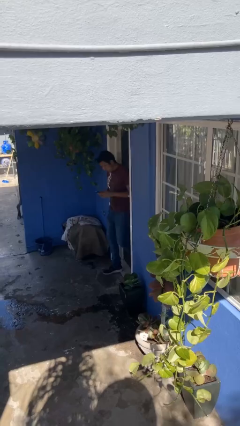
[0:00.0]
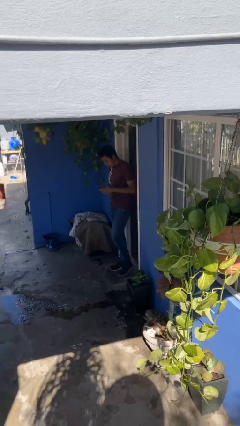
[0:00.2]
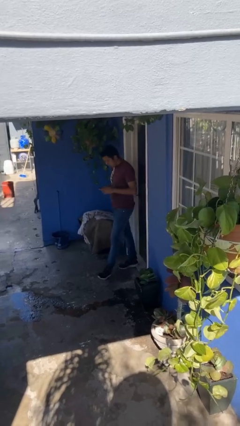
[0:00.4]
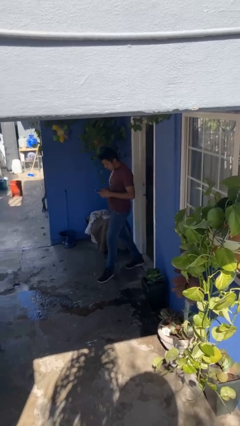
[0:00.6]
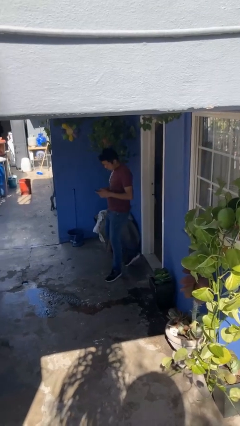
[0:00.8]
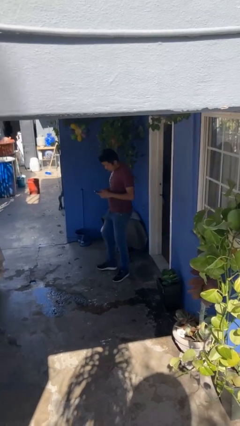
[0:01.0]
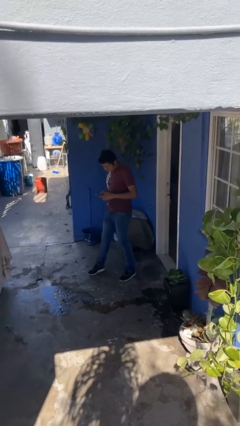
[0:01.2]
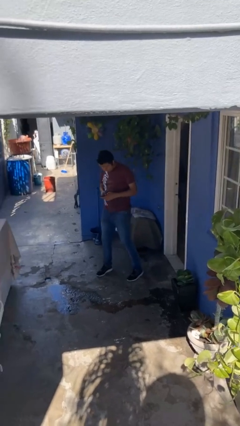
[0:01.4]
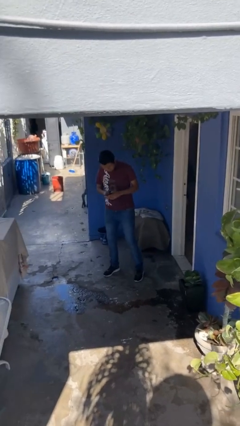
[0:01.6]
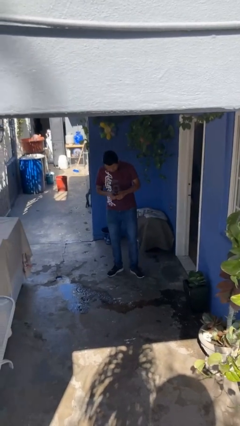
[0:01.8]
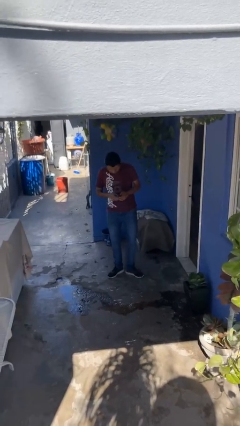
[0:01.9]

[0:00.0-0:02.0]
person enters scene through structure

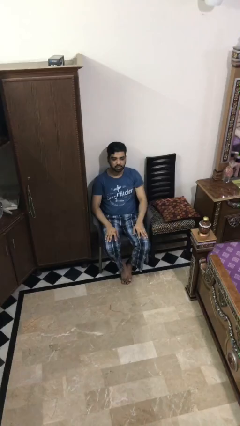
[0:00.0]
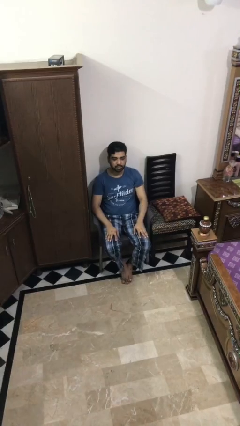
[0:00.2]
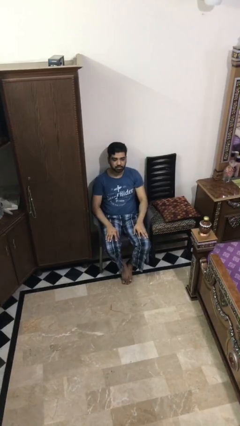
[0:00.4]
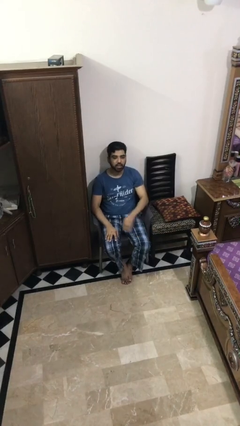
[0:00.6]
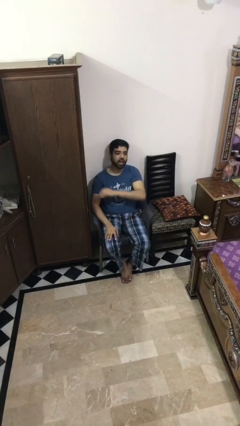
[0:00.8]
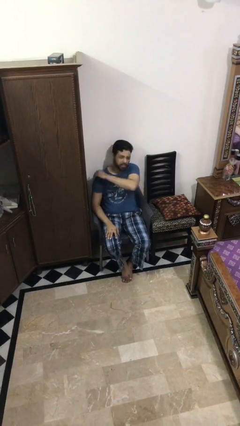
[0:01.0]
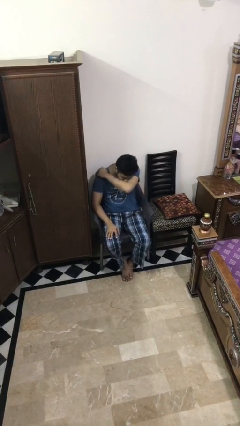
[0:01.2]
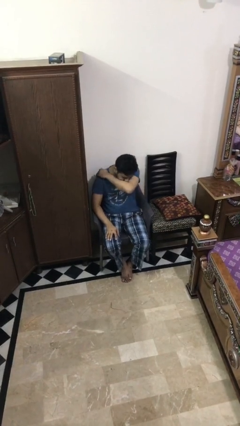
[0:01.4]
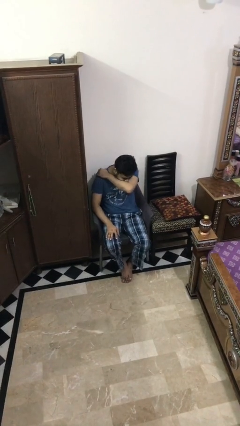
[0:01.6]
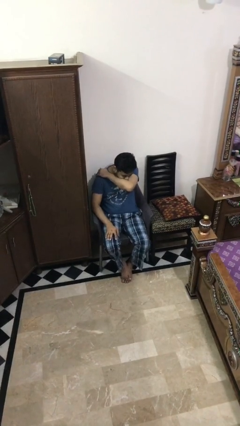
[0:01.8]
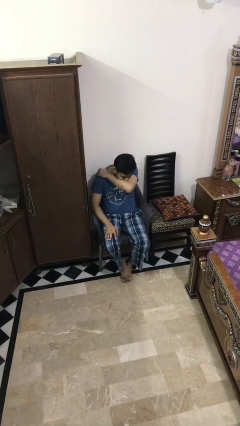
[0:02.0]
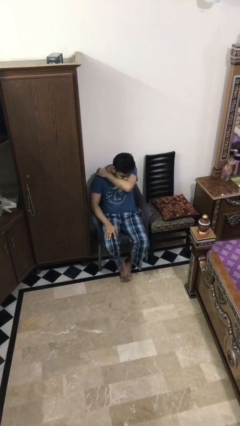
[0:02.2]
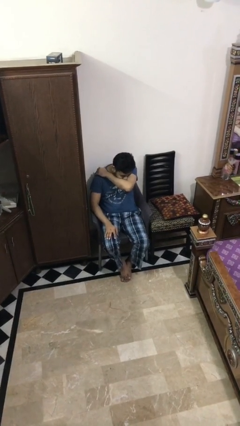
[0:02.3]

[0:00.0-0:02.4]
person sneezes into arm

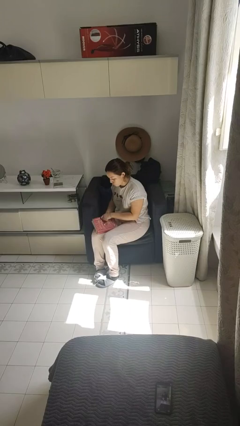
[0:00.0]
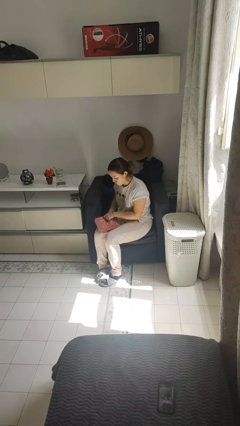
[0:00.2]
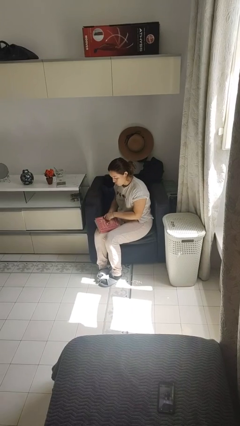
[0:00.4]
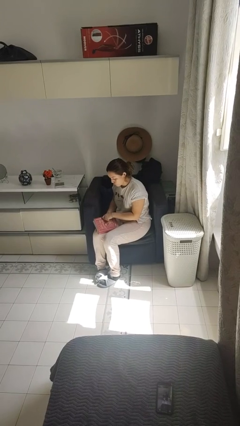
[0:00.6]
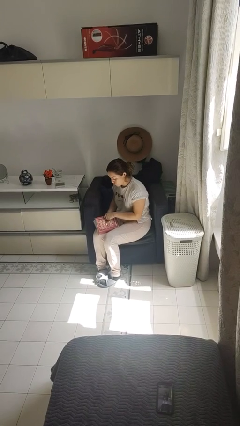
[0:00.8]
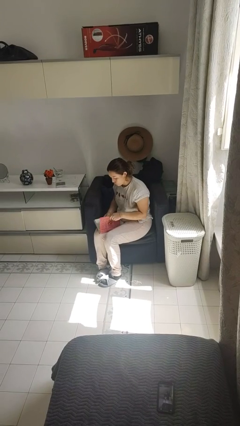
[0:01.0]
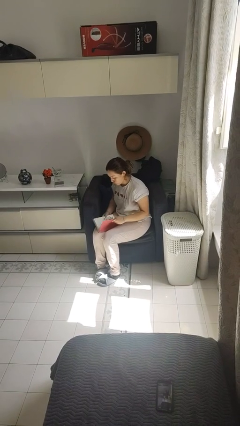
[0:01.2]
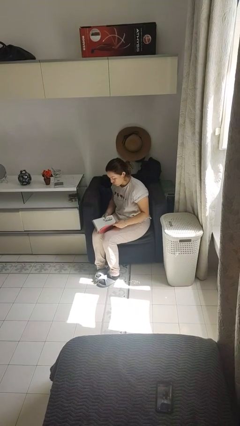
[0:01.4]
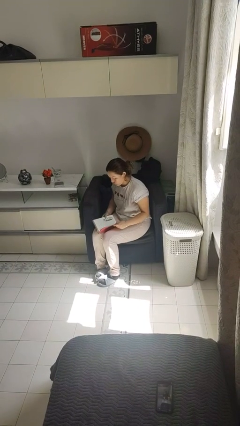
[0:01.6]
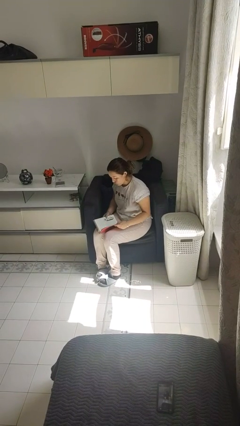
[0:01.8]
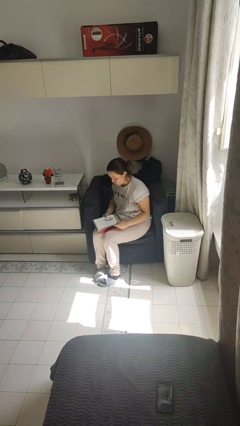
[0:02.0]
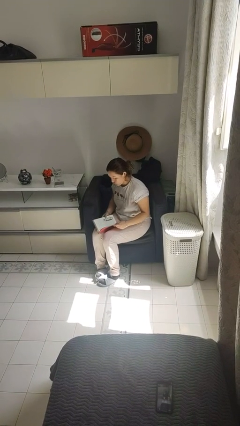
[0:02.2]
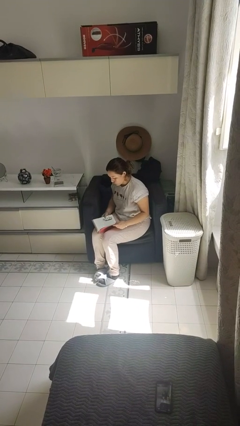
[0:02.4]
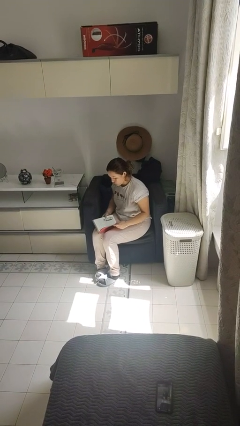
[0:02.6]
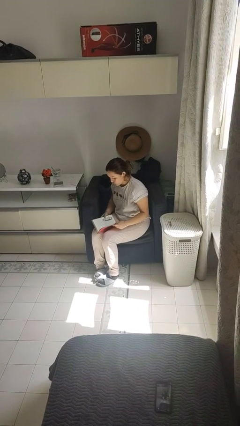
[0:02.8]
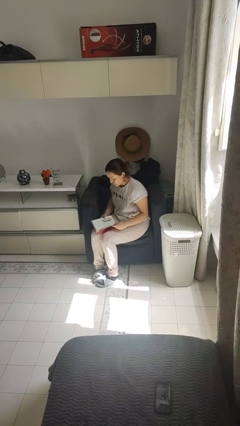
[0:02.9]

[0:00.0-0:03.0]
person reads book

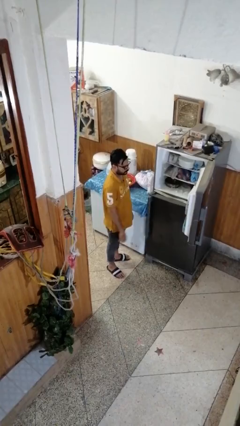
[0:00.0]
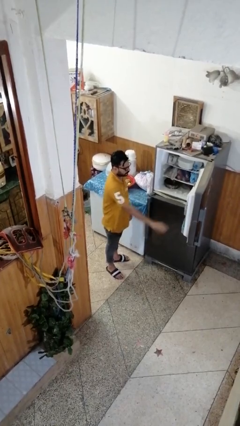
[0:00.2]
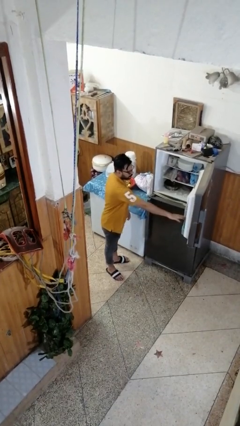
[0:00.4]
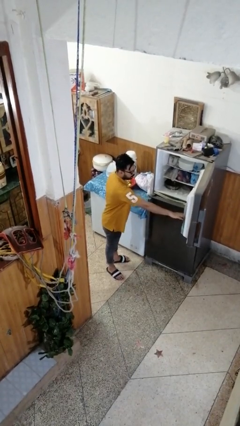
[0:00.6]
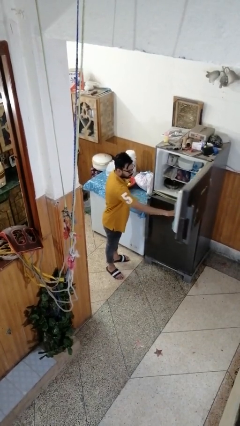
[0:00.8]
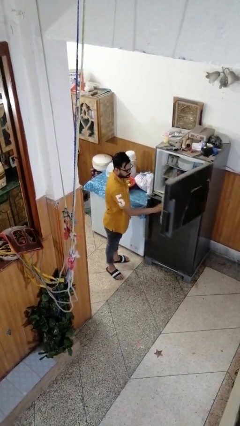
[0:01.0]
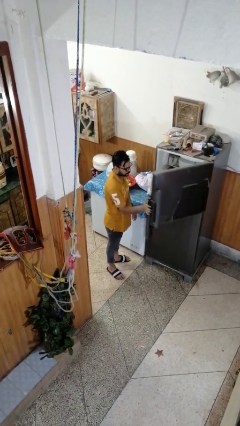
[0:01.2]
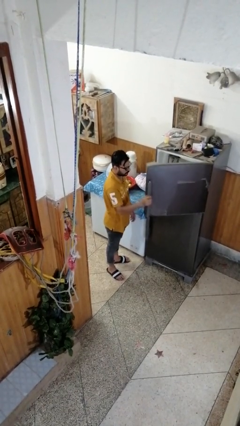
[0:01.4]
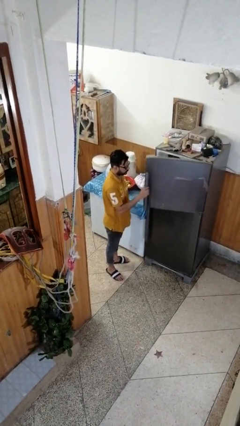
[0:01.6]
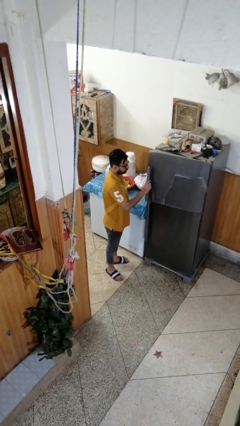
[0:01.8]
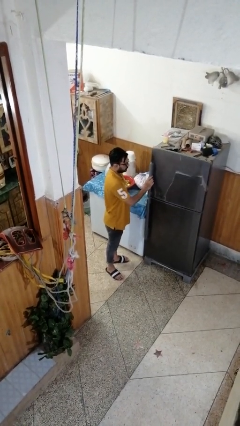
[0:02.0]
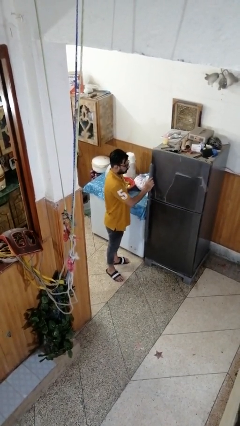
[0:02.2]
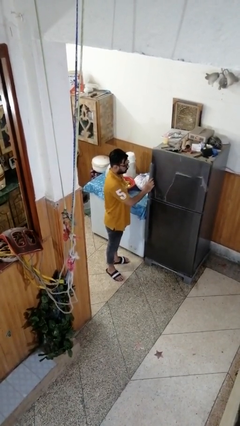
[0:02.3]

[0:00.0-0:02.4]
person closes refrigerator

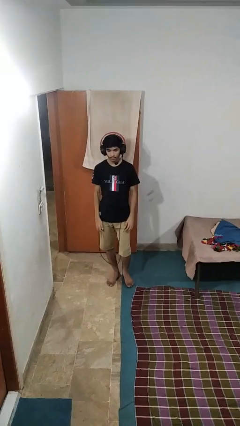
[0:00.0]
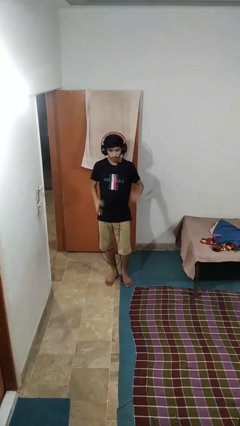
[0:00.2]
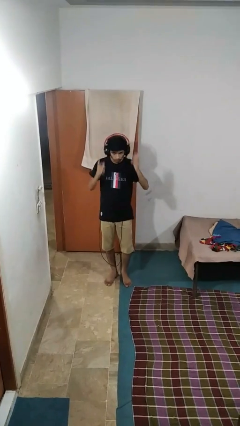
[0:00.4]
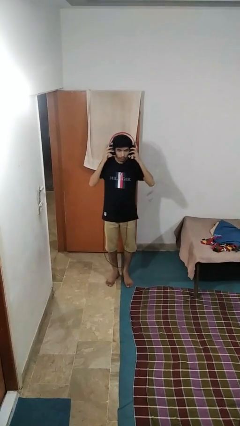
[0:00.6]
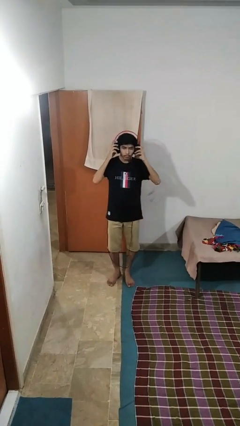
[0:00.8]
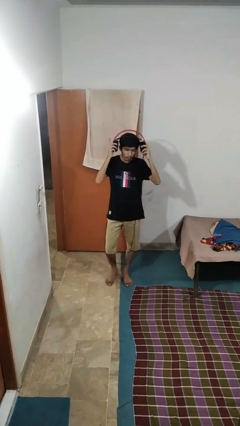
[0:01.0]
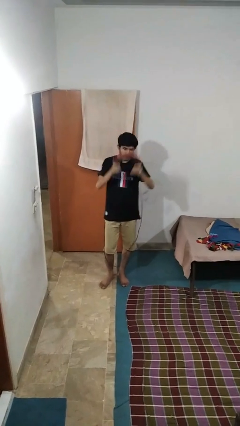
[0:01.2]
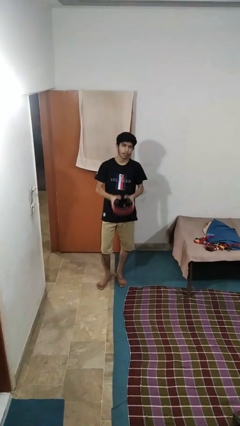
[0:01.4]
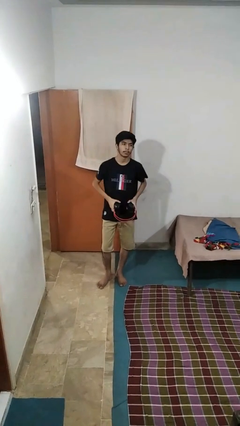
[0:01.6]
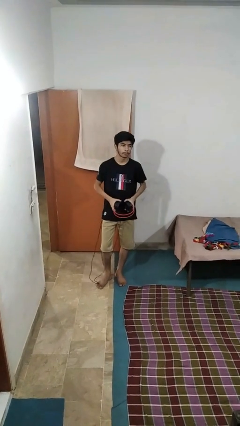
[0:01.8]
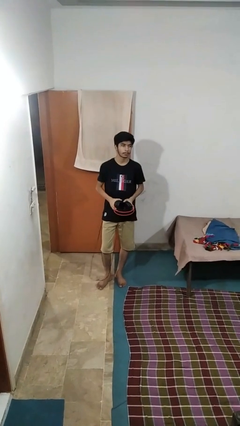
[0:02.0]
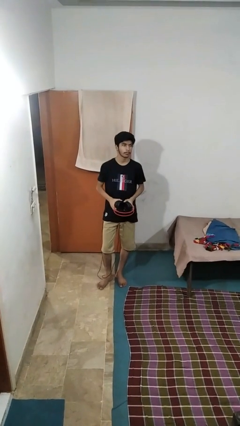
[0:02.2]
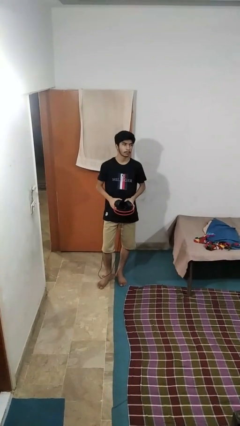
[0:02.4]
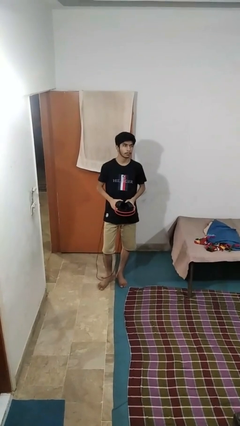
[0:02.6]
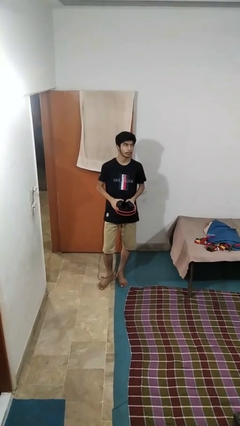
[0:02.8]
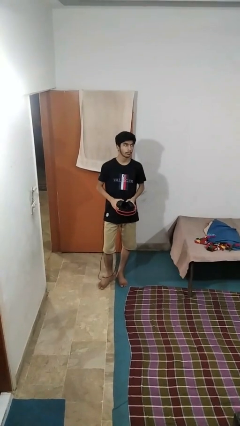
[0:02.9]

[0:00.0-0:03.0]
person takes off headphones

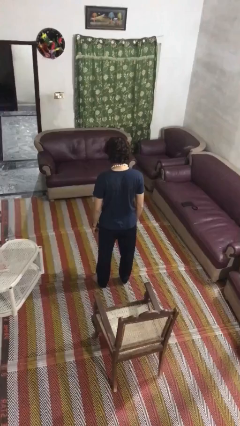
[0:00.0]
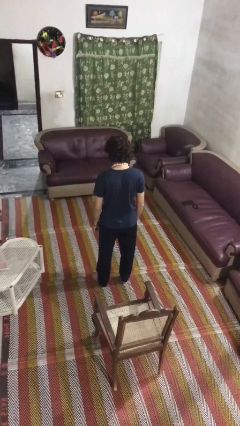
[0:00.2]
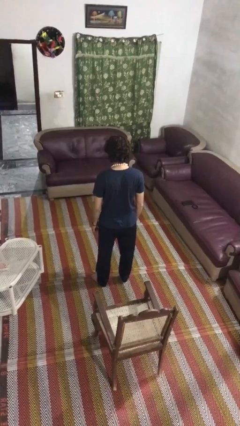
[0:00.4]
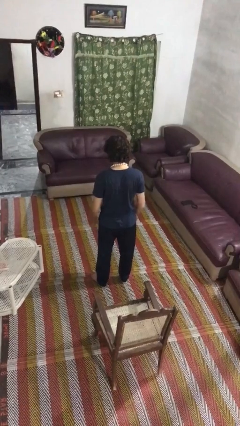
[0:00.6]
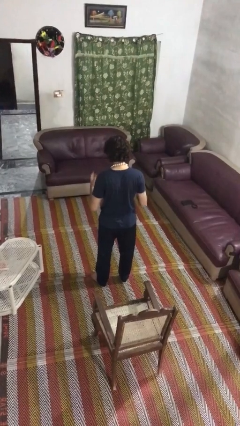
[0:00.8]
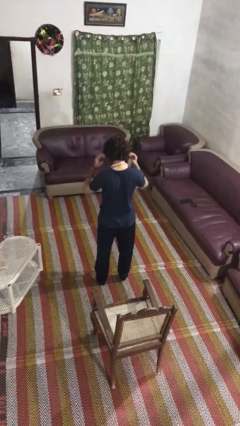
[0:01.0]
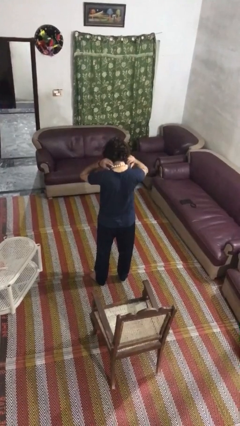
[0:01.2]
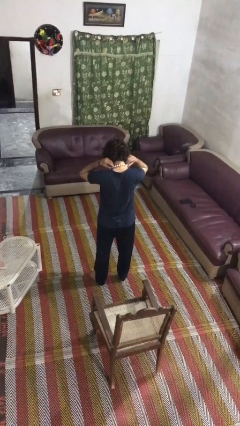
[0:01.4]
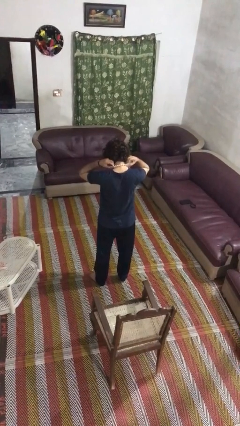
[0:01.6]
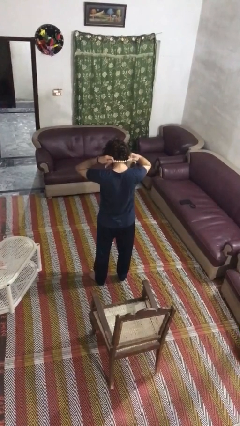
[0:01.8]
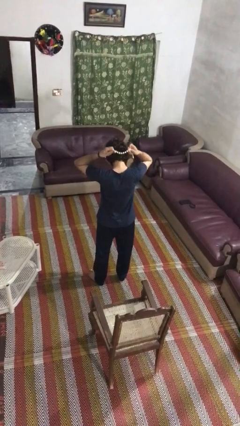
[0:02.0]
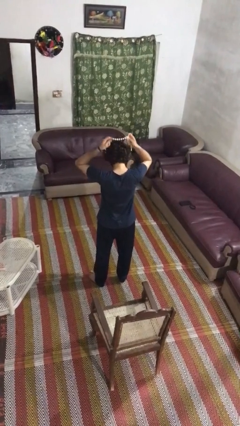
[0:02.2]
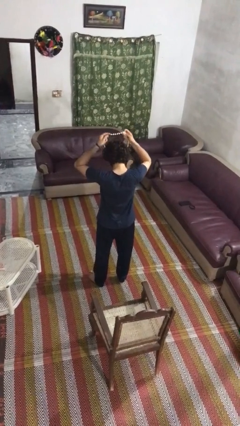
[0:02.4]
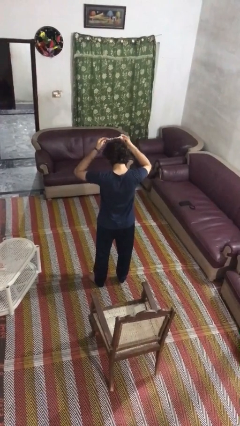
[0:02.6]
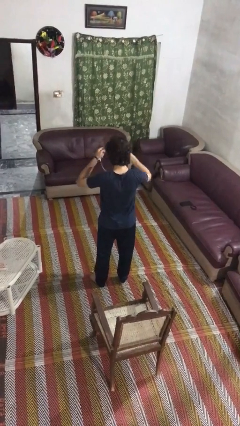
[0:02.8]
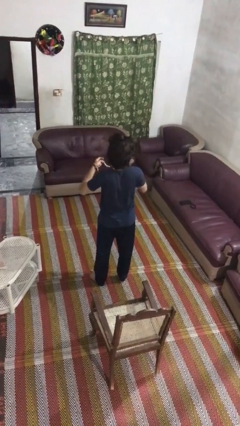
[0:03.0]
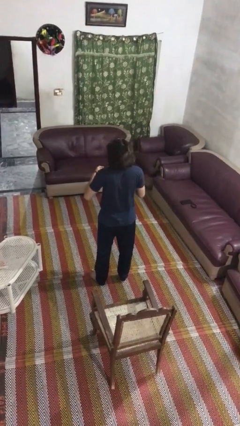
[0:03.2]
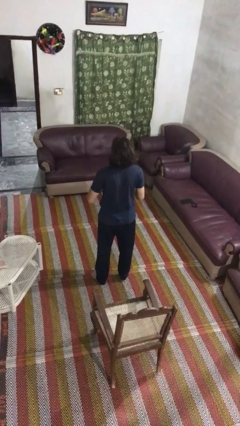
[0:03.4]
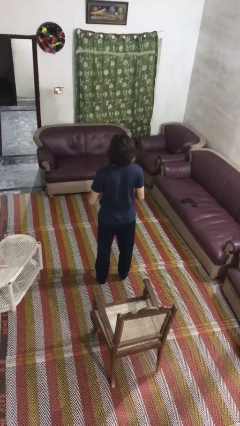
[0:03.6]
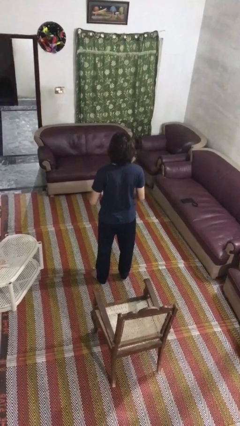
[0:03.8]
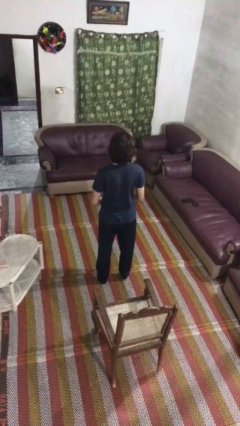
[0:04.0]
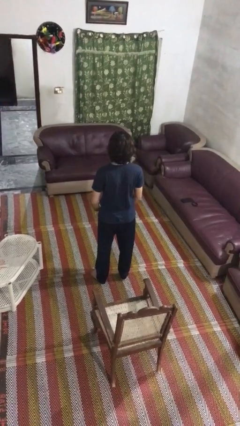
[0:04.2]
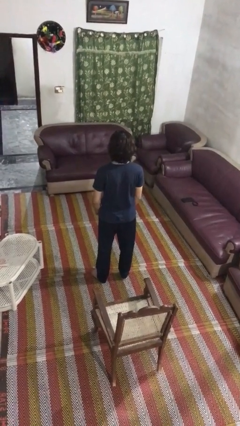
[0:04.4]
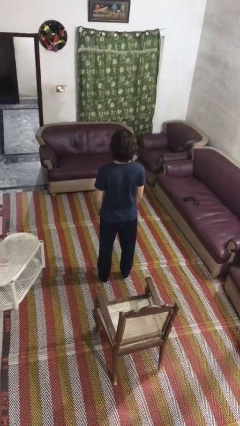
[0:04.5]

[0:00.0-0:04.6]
person takes off necklace

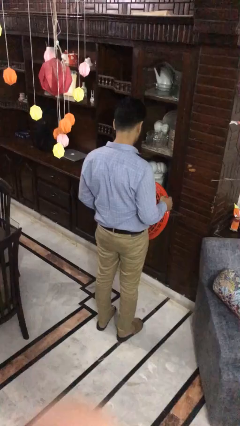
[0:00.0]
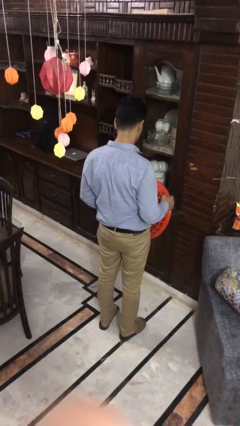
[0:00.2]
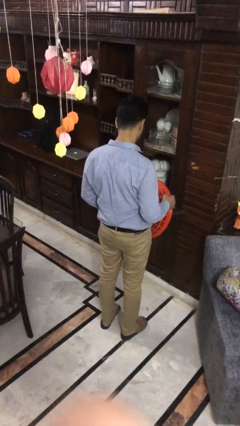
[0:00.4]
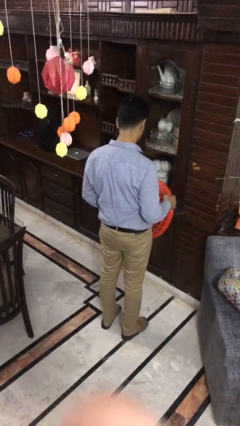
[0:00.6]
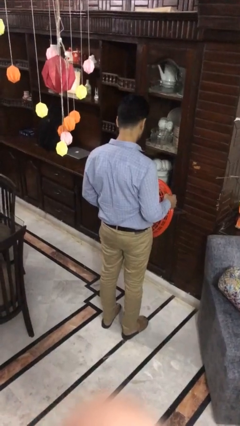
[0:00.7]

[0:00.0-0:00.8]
person drops object
